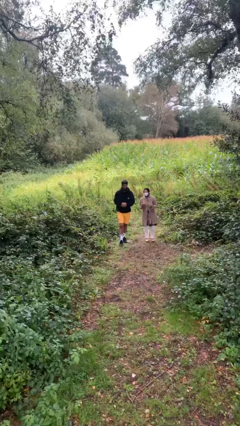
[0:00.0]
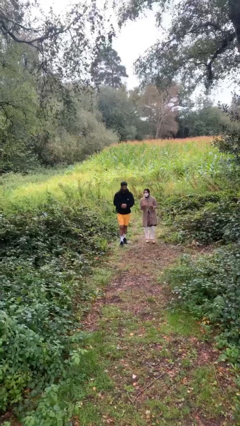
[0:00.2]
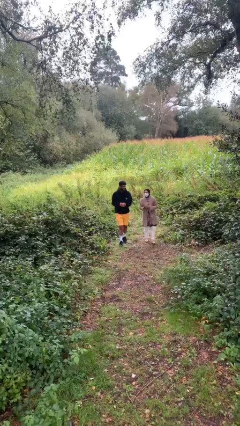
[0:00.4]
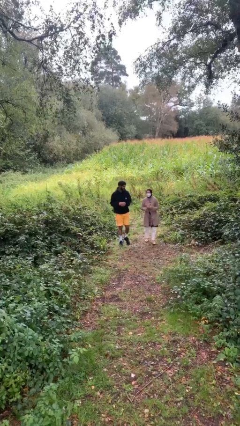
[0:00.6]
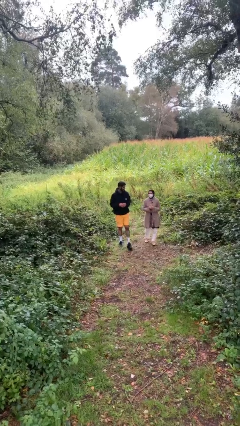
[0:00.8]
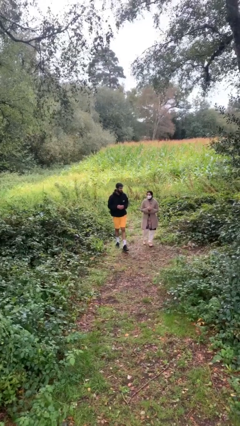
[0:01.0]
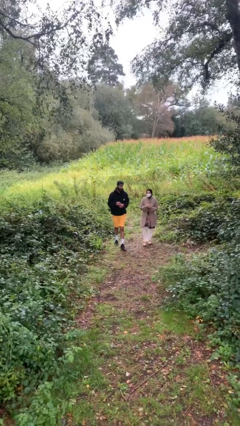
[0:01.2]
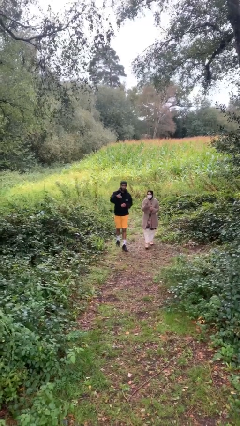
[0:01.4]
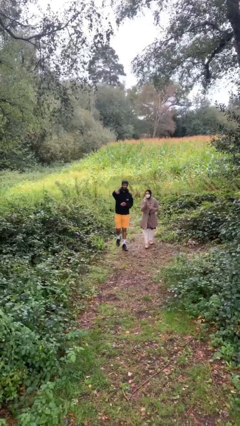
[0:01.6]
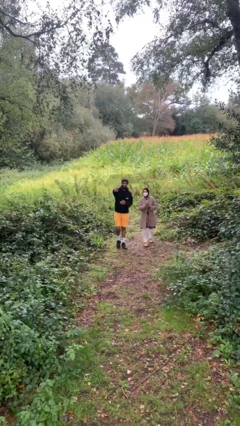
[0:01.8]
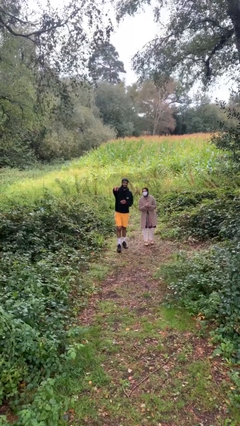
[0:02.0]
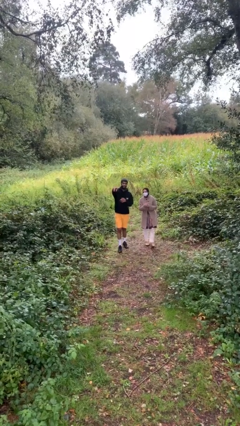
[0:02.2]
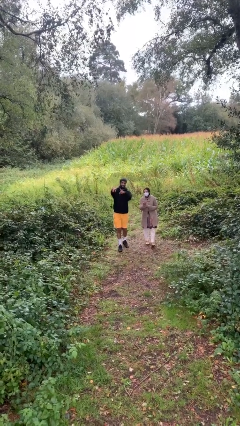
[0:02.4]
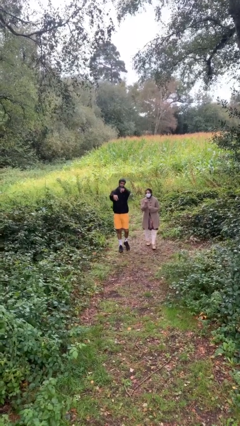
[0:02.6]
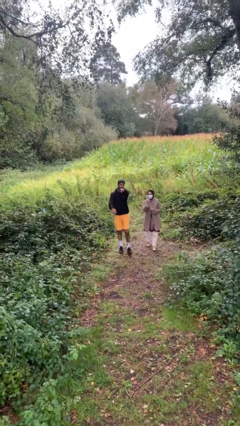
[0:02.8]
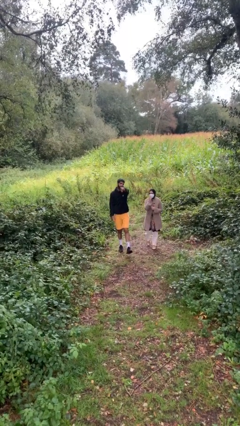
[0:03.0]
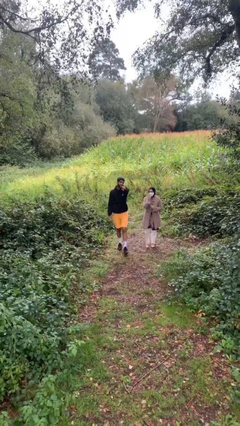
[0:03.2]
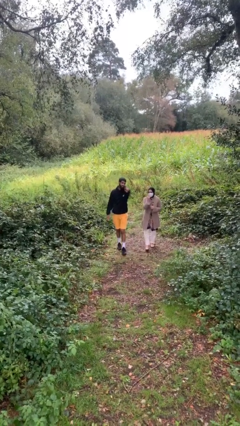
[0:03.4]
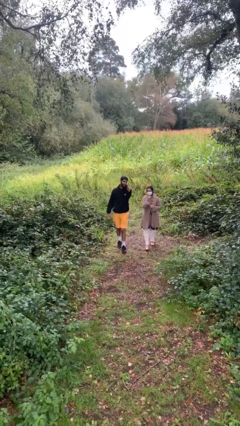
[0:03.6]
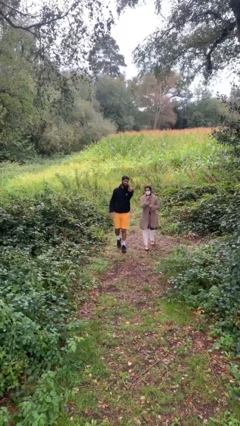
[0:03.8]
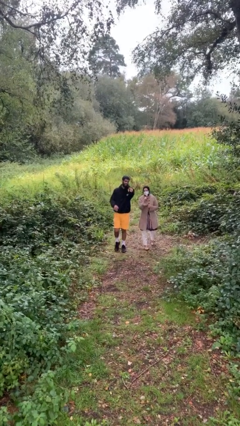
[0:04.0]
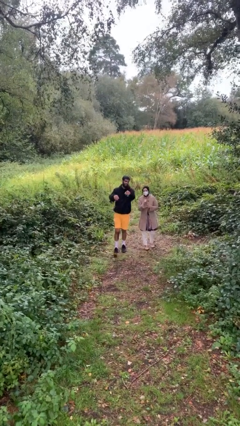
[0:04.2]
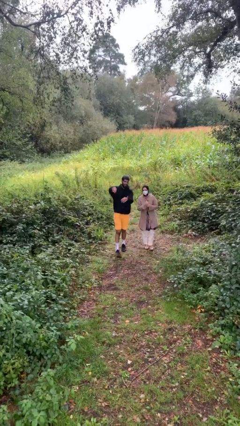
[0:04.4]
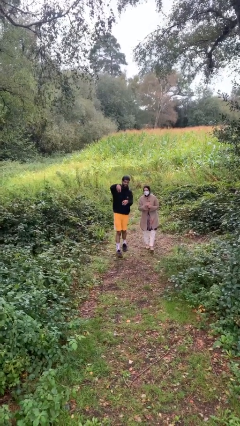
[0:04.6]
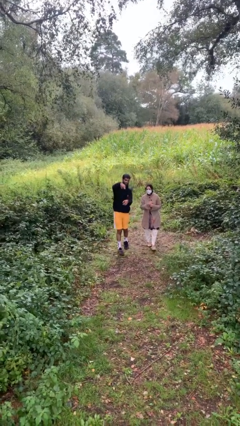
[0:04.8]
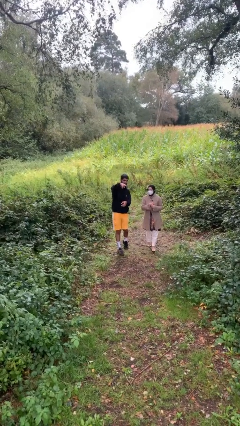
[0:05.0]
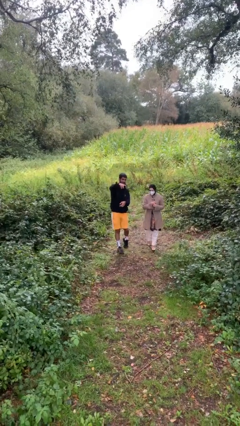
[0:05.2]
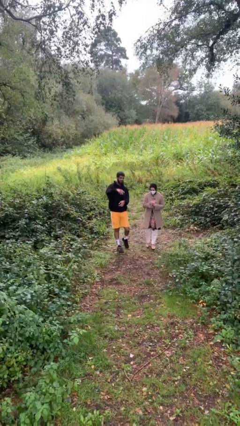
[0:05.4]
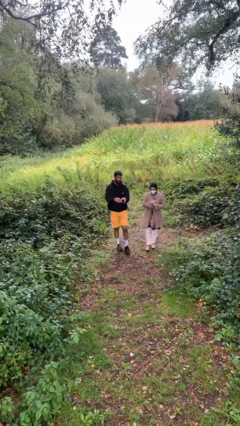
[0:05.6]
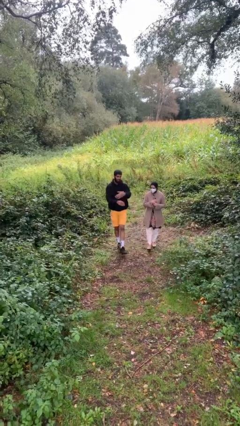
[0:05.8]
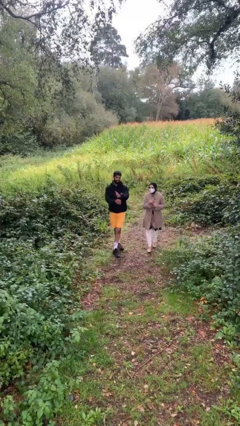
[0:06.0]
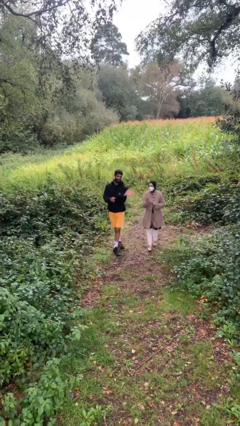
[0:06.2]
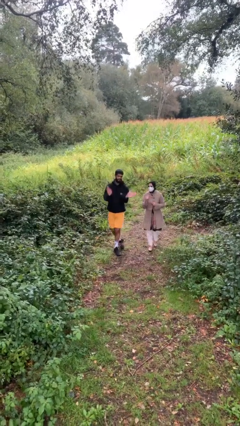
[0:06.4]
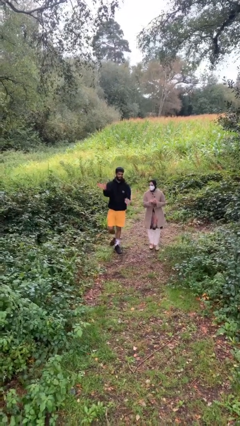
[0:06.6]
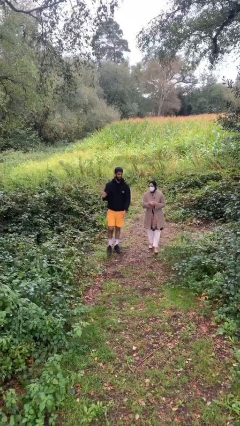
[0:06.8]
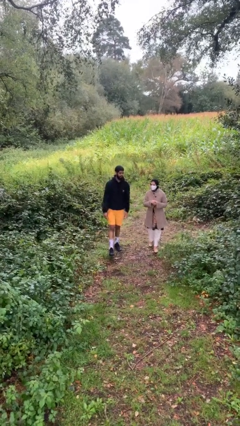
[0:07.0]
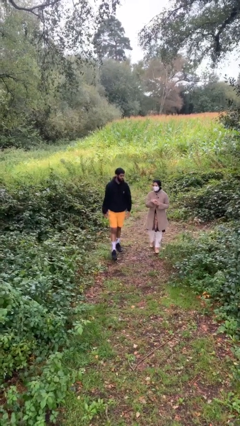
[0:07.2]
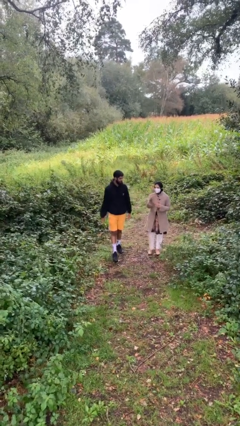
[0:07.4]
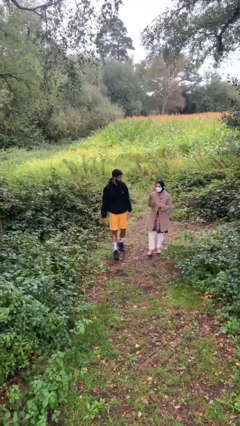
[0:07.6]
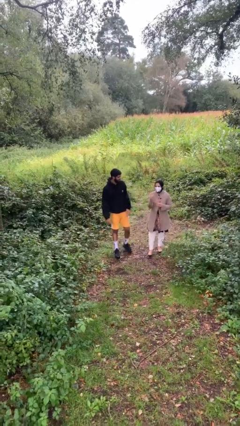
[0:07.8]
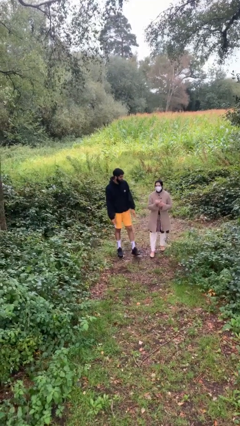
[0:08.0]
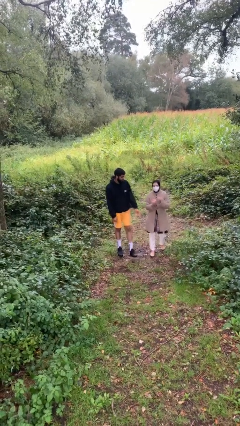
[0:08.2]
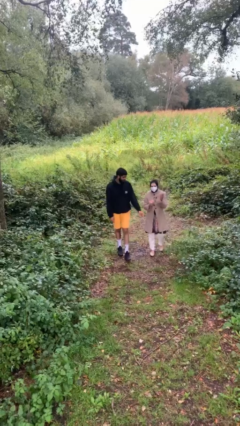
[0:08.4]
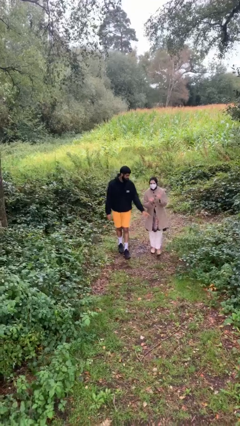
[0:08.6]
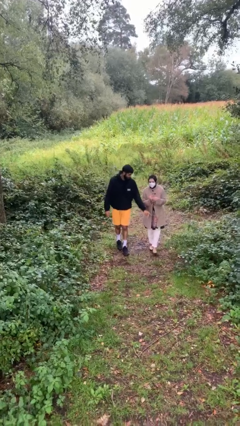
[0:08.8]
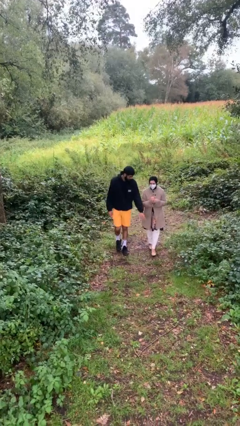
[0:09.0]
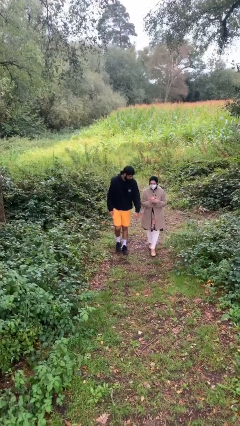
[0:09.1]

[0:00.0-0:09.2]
person talks to person

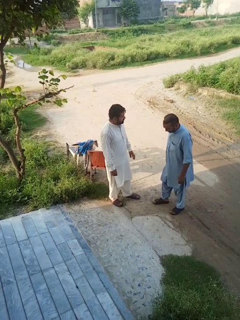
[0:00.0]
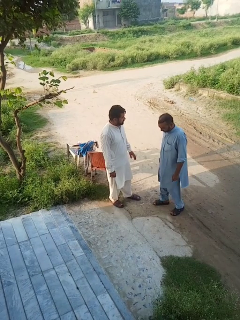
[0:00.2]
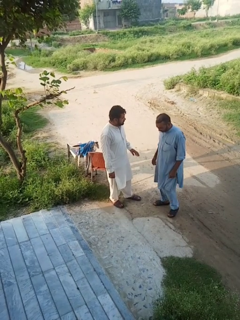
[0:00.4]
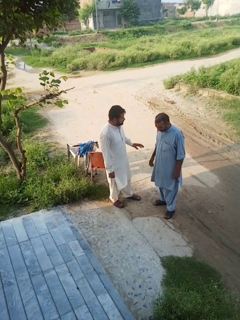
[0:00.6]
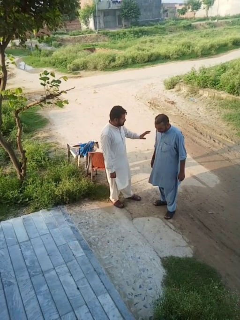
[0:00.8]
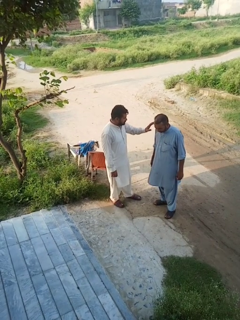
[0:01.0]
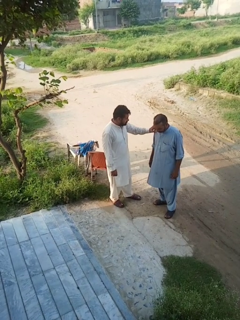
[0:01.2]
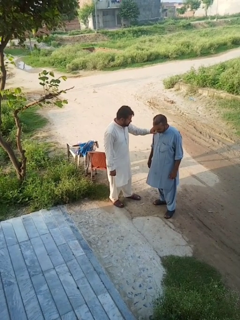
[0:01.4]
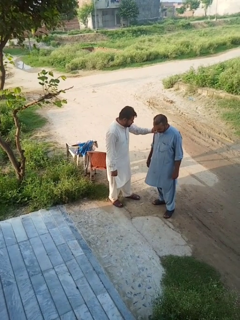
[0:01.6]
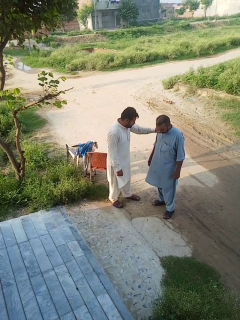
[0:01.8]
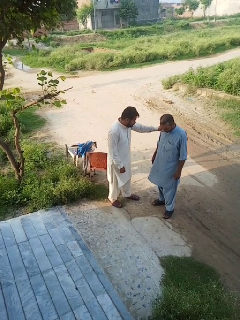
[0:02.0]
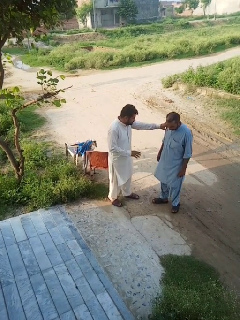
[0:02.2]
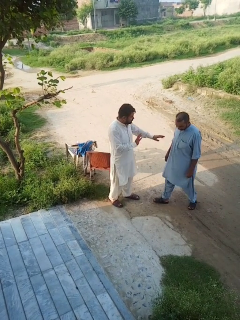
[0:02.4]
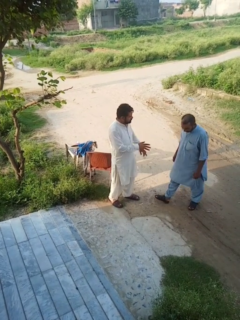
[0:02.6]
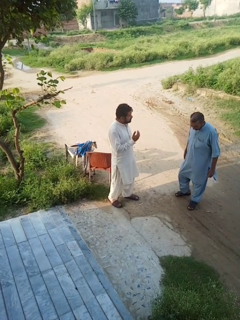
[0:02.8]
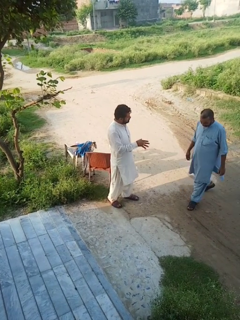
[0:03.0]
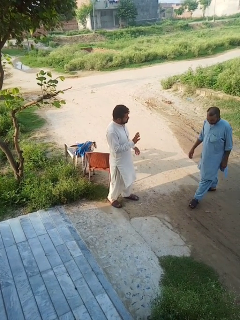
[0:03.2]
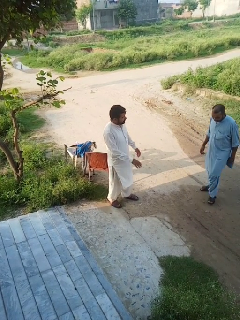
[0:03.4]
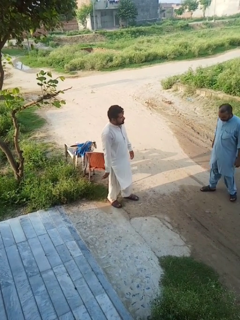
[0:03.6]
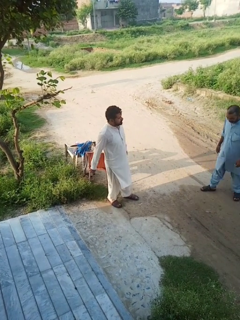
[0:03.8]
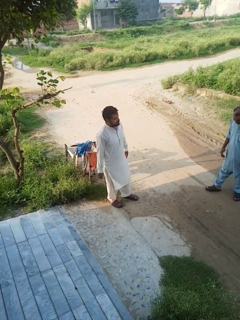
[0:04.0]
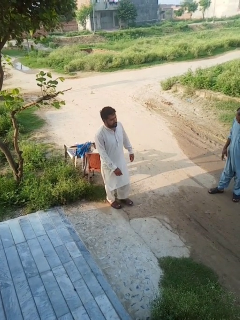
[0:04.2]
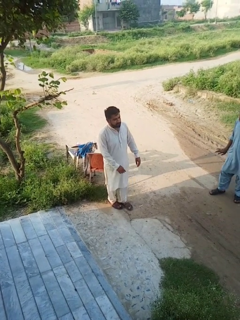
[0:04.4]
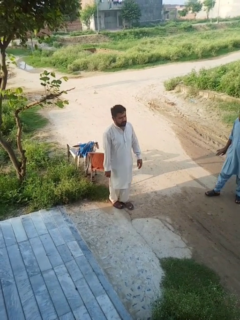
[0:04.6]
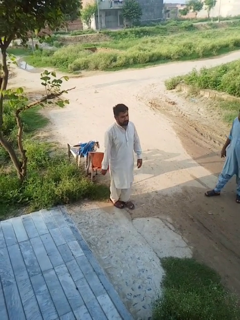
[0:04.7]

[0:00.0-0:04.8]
person shoves person

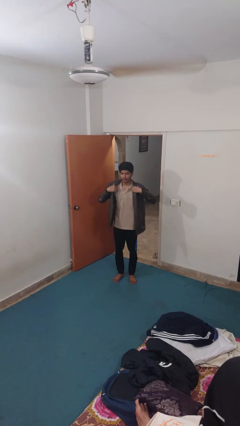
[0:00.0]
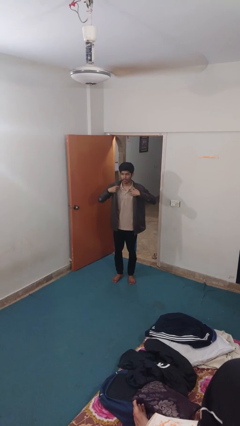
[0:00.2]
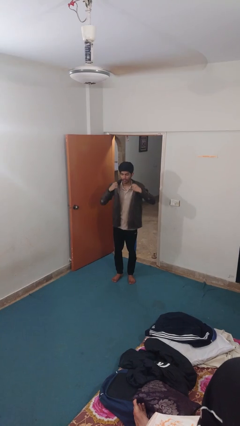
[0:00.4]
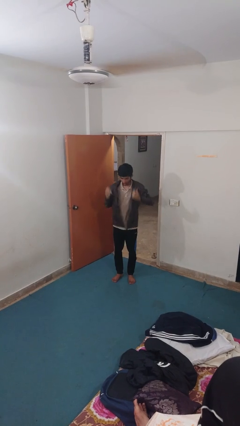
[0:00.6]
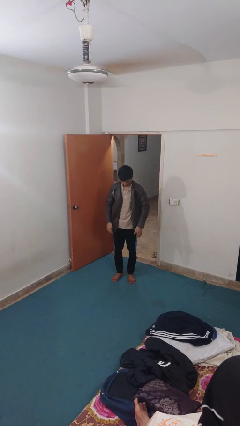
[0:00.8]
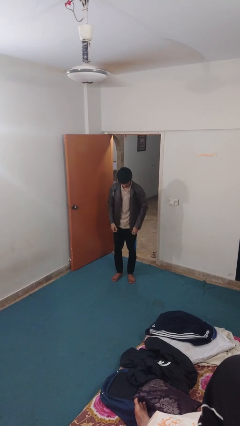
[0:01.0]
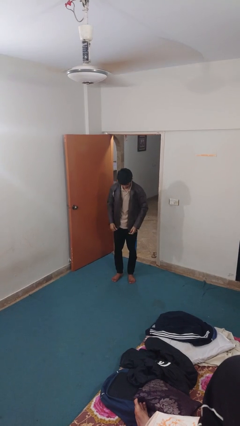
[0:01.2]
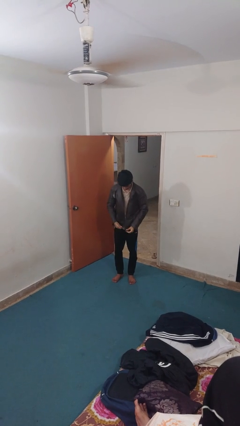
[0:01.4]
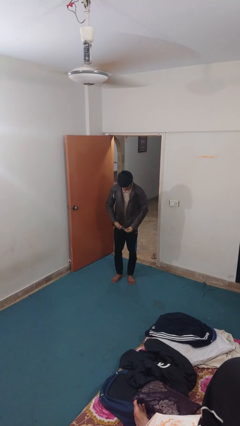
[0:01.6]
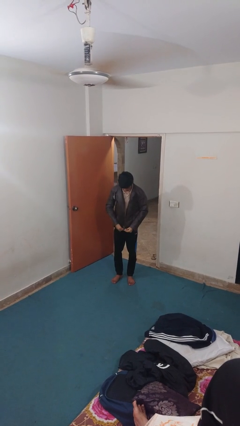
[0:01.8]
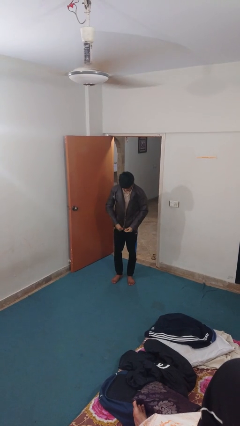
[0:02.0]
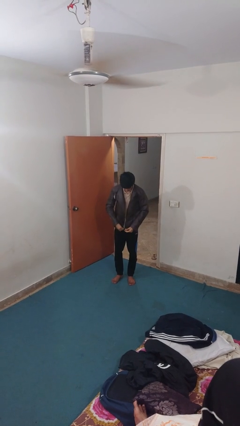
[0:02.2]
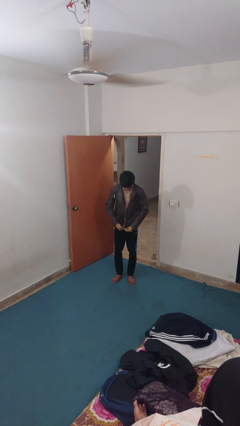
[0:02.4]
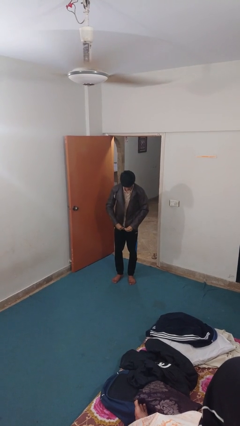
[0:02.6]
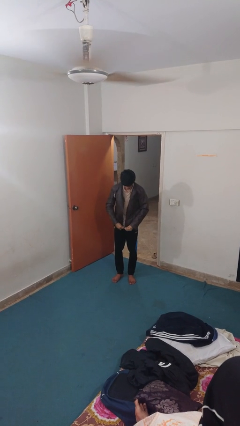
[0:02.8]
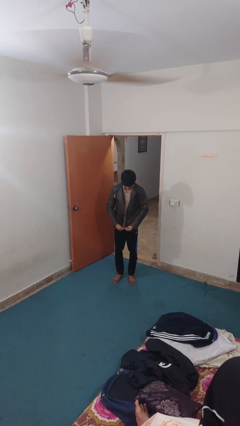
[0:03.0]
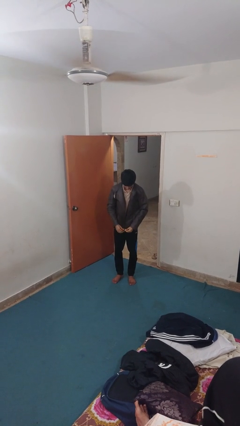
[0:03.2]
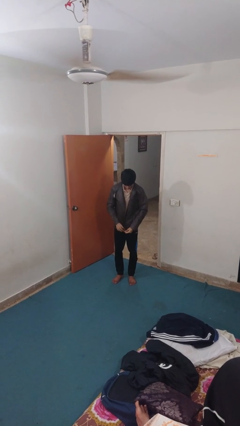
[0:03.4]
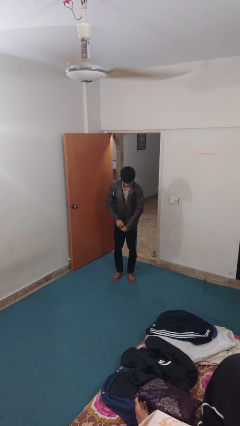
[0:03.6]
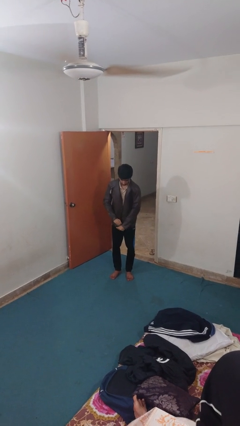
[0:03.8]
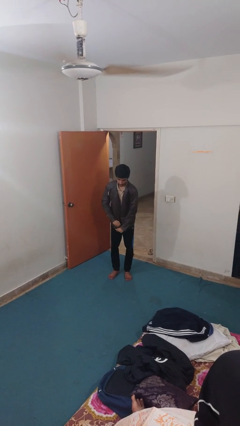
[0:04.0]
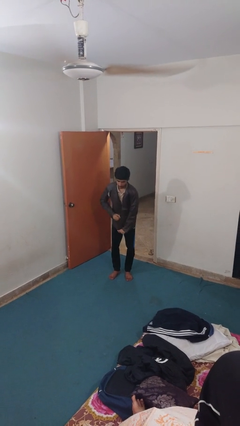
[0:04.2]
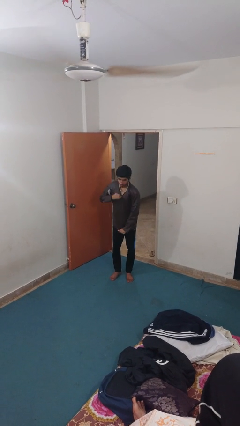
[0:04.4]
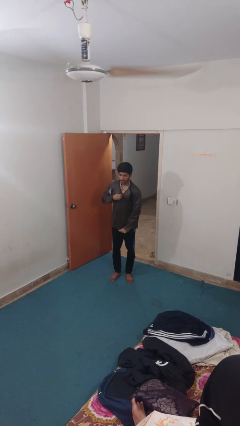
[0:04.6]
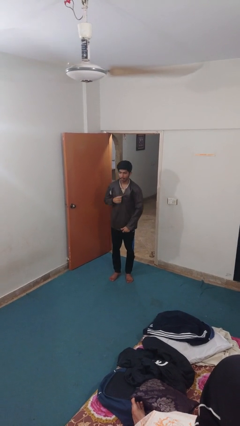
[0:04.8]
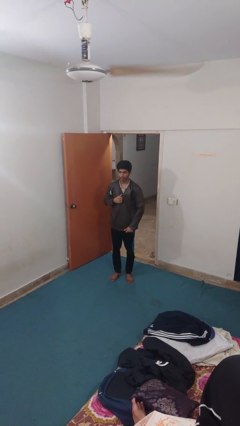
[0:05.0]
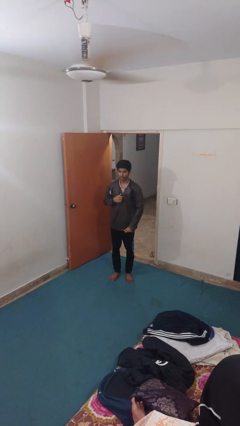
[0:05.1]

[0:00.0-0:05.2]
person zips up jacket
